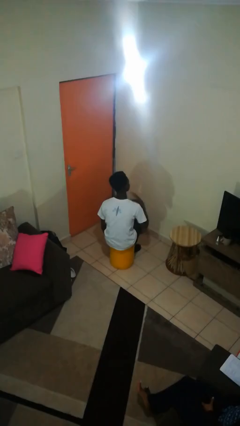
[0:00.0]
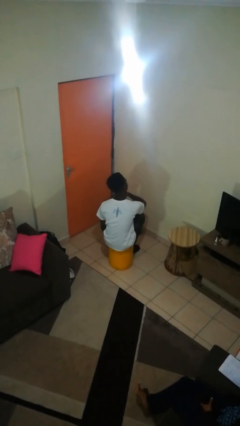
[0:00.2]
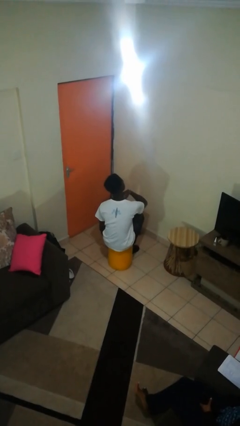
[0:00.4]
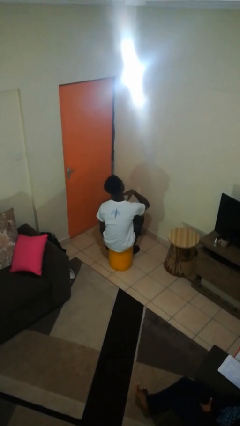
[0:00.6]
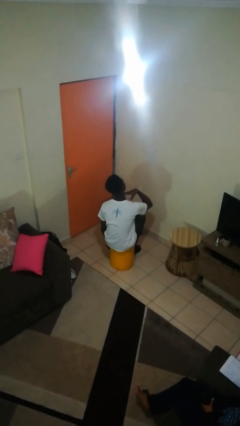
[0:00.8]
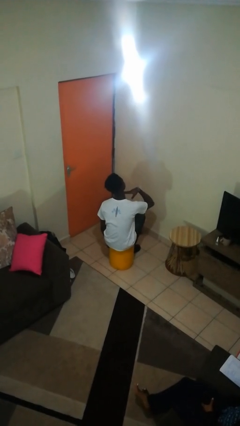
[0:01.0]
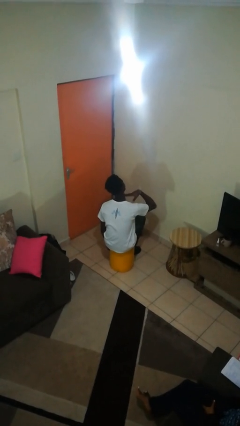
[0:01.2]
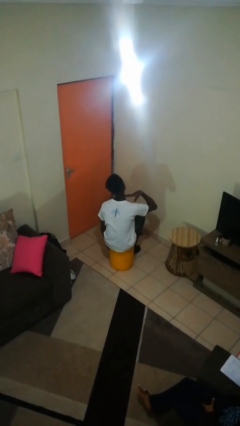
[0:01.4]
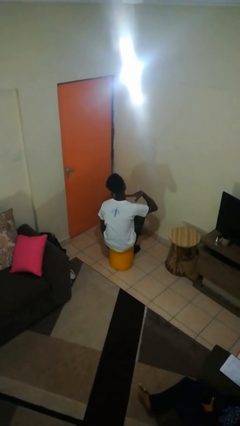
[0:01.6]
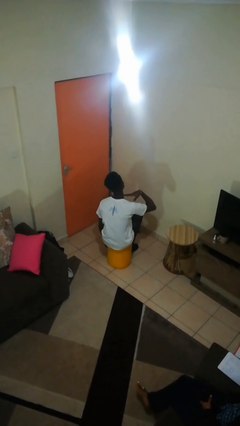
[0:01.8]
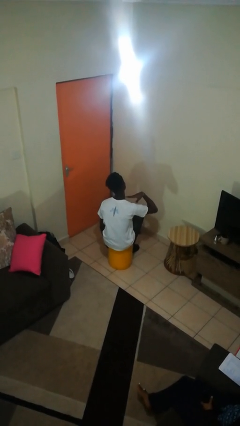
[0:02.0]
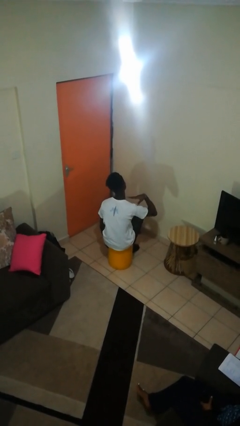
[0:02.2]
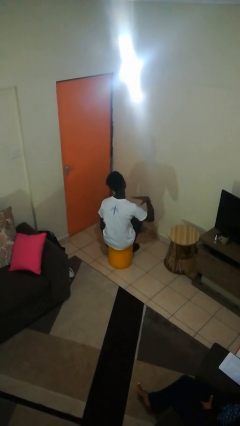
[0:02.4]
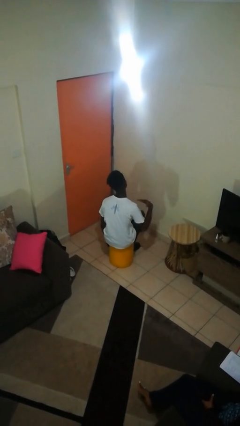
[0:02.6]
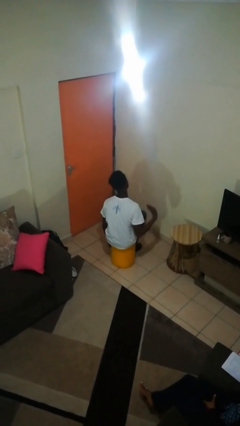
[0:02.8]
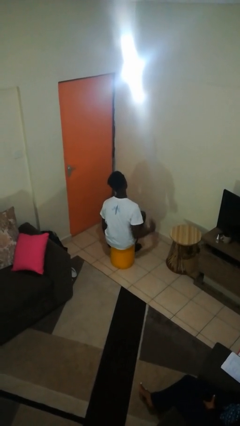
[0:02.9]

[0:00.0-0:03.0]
person gestures cut

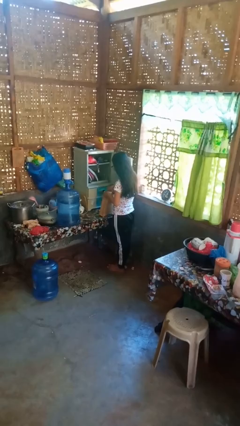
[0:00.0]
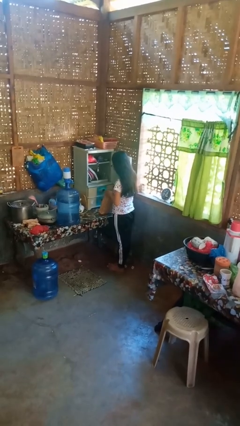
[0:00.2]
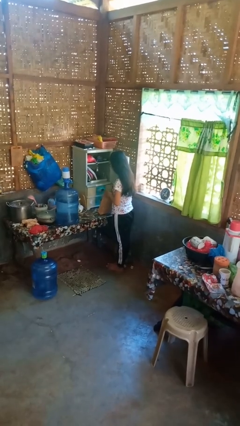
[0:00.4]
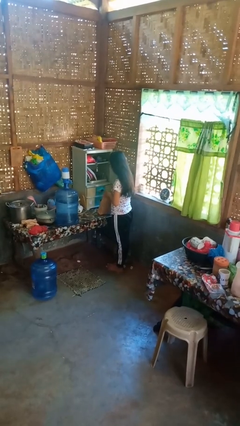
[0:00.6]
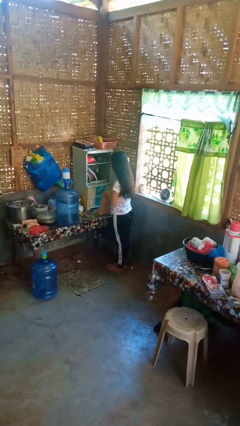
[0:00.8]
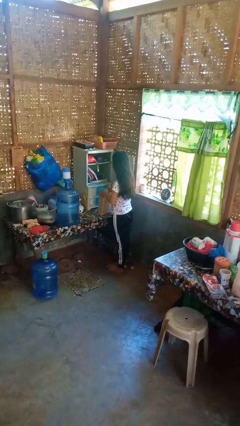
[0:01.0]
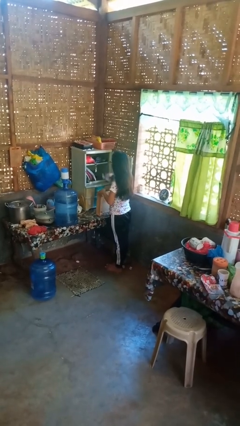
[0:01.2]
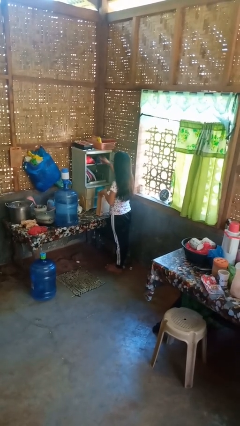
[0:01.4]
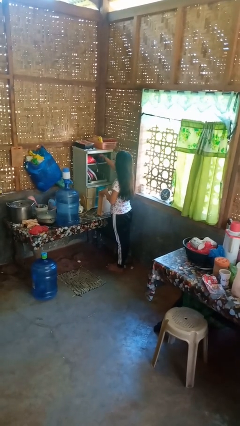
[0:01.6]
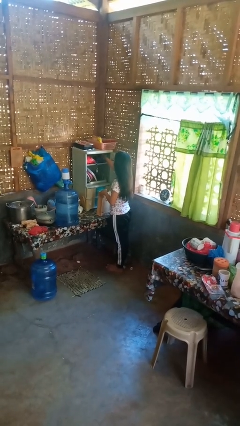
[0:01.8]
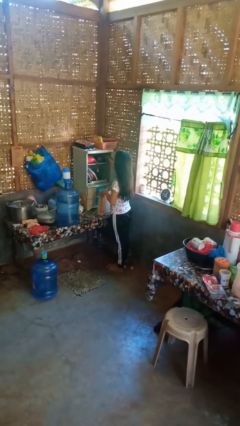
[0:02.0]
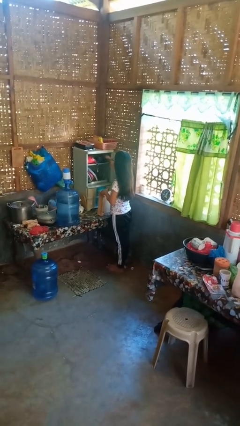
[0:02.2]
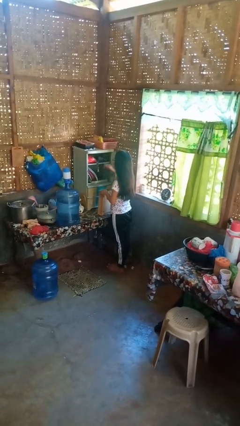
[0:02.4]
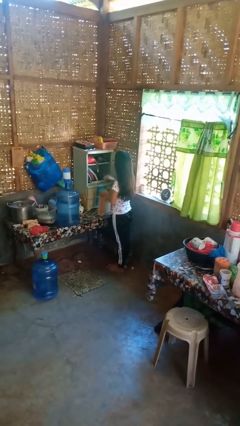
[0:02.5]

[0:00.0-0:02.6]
person loads groceries into cabinet

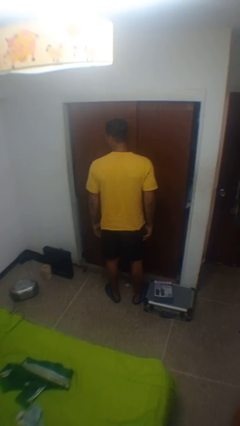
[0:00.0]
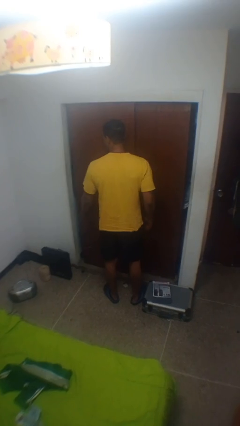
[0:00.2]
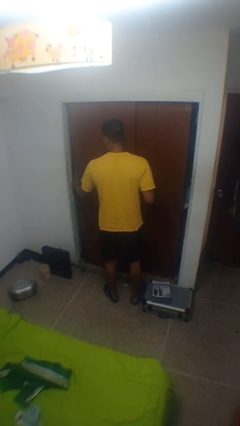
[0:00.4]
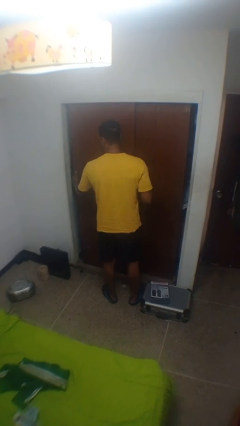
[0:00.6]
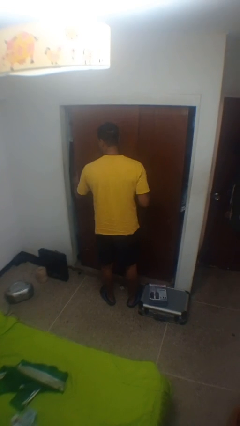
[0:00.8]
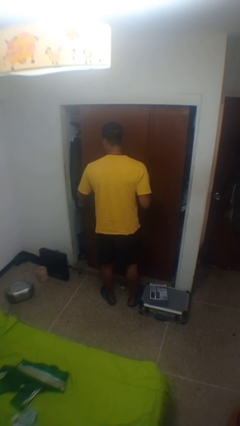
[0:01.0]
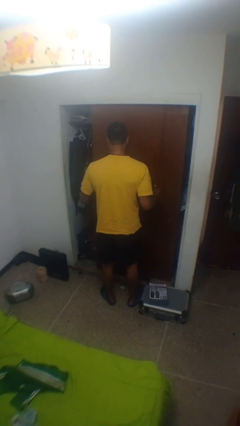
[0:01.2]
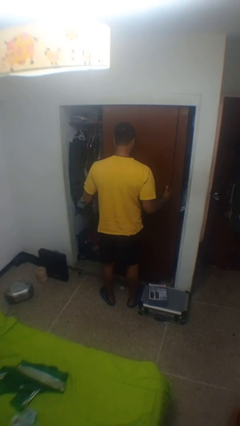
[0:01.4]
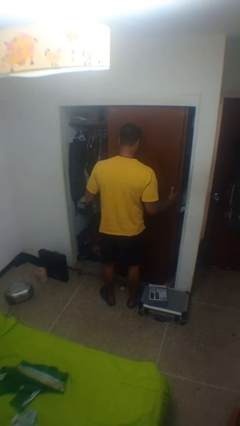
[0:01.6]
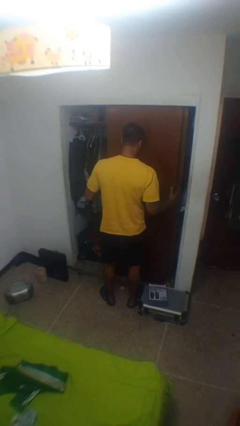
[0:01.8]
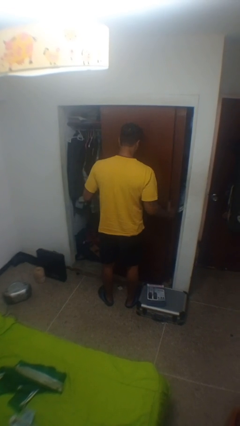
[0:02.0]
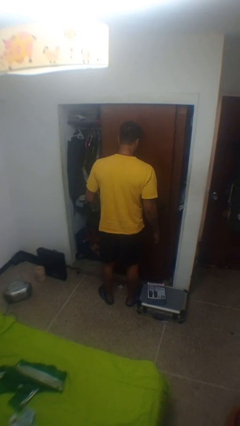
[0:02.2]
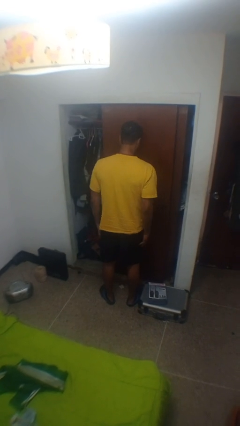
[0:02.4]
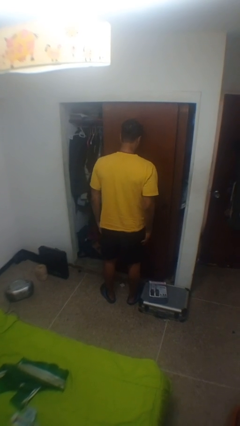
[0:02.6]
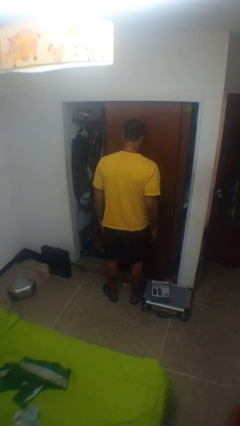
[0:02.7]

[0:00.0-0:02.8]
person opens closet door

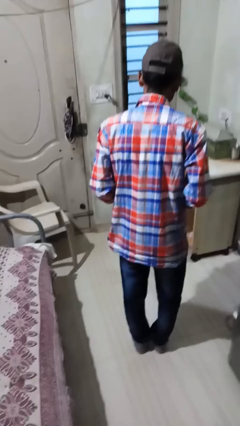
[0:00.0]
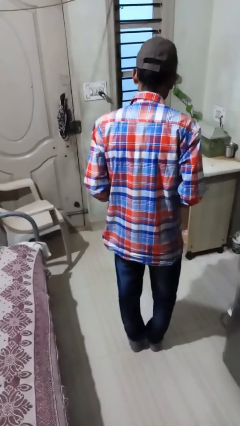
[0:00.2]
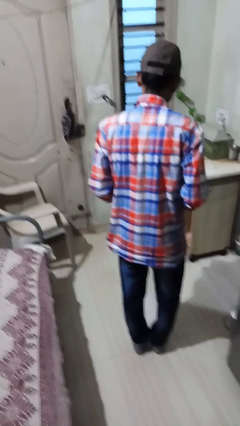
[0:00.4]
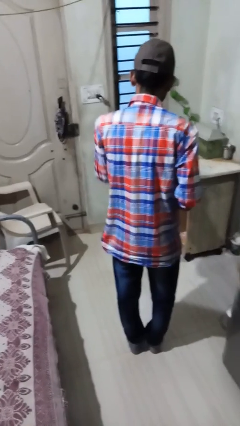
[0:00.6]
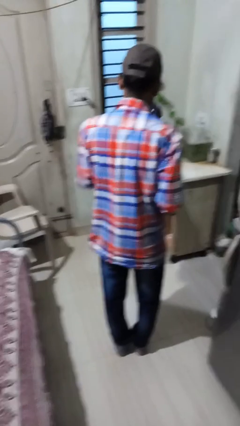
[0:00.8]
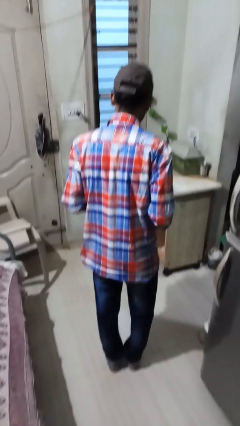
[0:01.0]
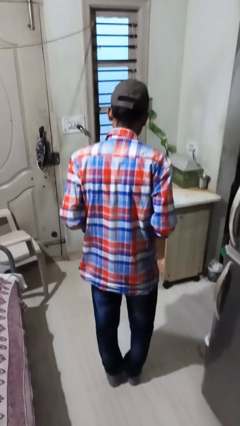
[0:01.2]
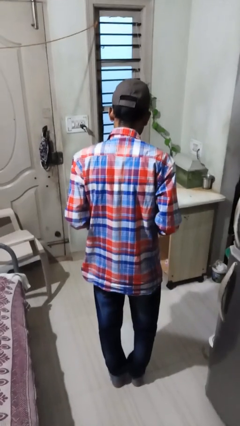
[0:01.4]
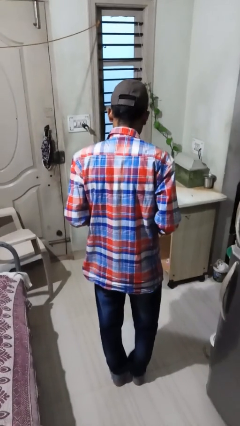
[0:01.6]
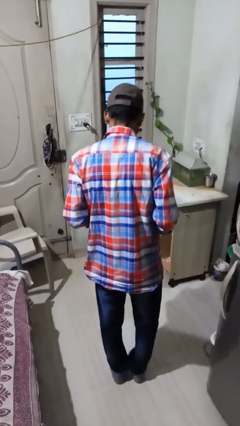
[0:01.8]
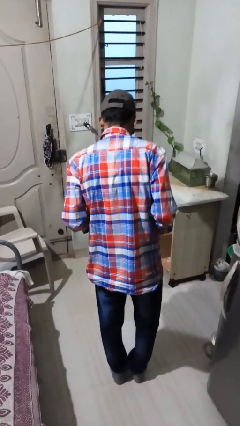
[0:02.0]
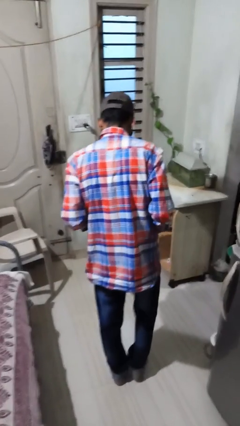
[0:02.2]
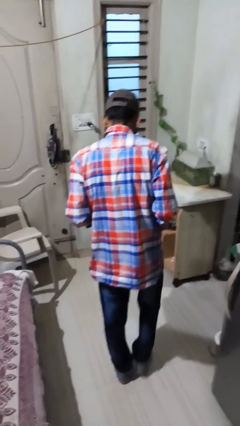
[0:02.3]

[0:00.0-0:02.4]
person throws object on table

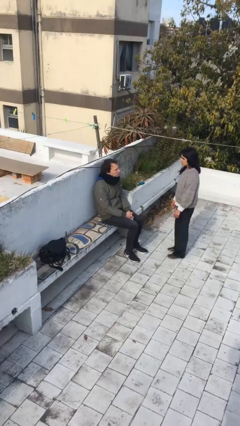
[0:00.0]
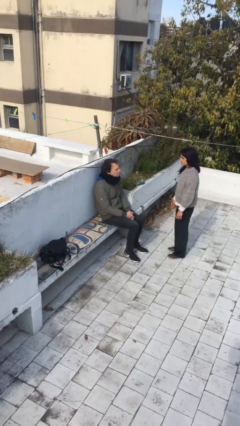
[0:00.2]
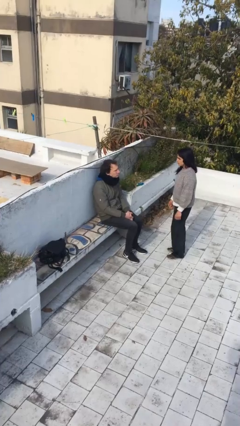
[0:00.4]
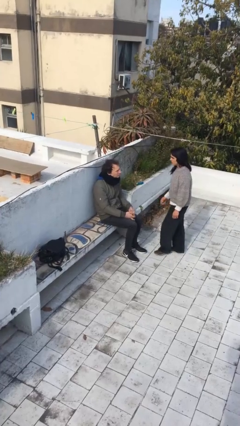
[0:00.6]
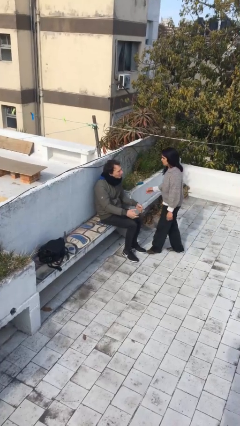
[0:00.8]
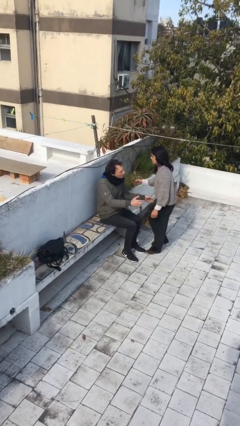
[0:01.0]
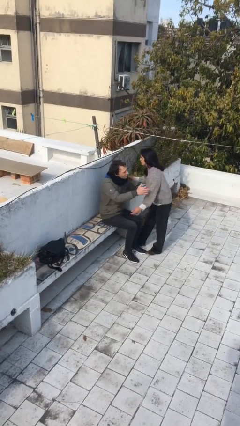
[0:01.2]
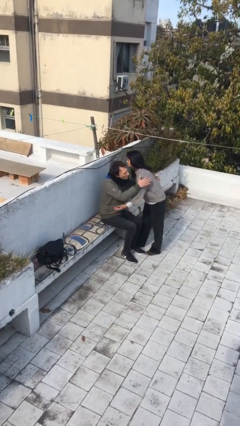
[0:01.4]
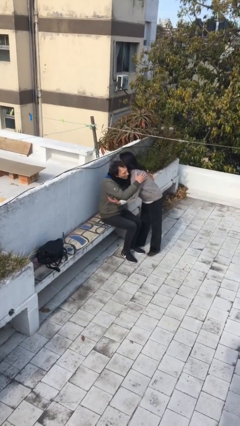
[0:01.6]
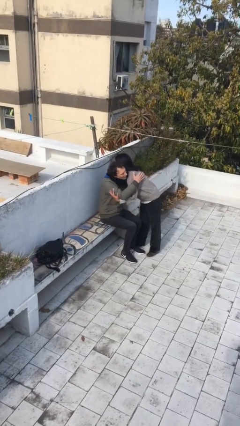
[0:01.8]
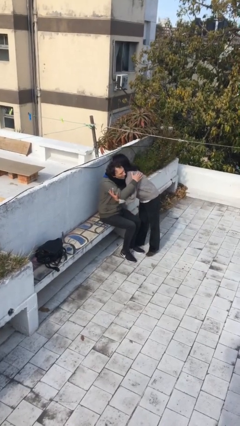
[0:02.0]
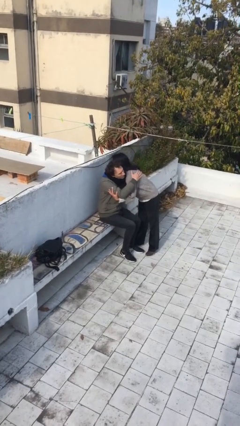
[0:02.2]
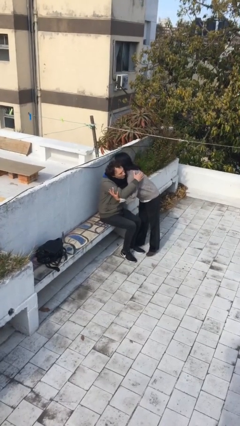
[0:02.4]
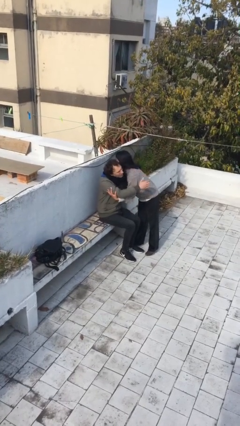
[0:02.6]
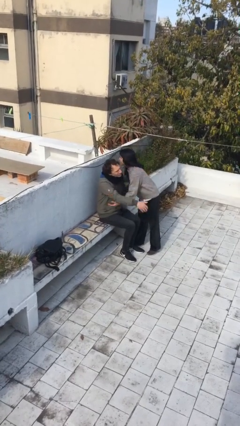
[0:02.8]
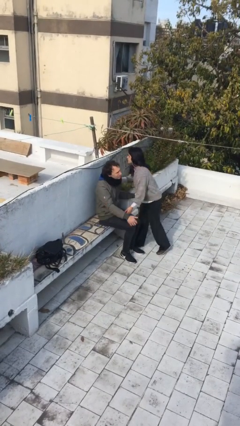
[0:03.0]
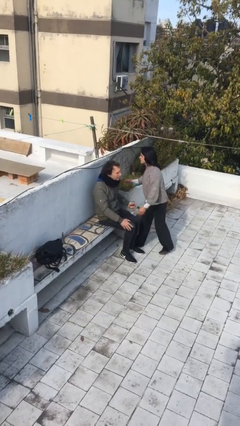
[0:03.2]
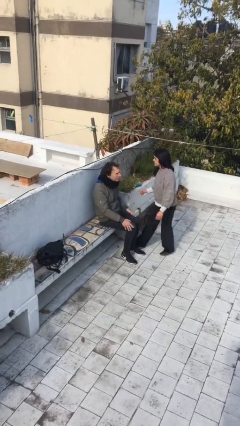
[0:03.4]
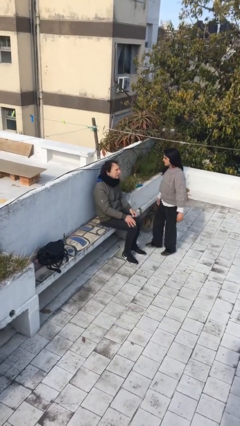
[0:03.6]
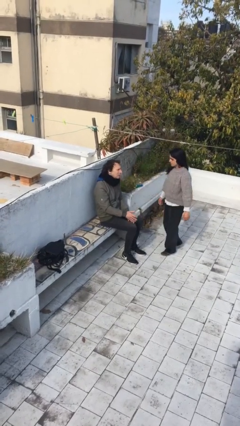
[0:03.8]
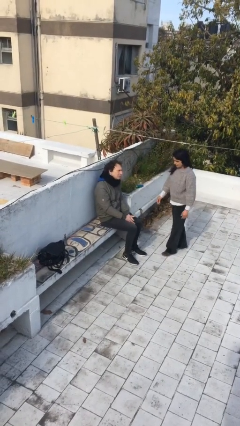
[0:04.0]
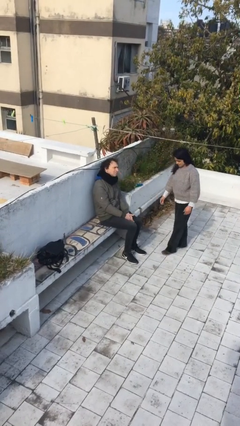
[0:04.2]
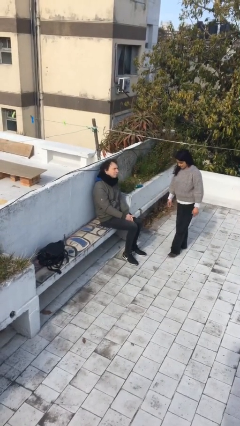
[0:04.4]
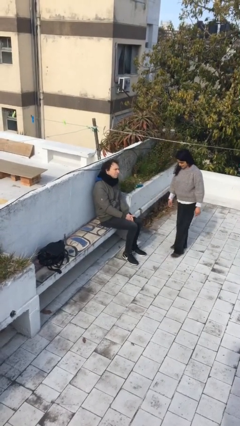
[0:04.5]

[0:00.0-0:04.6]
person embraces person

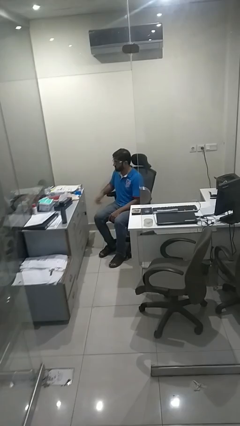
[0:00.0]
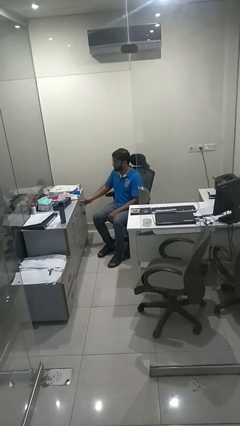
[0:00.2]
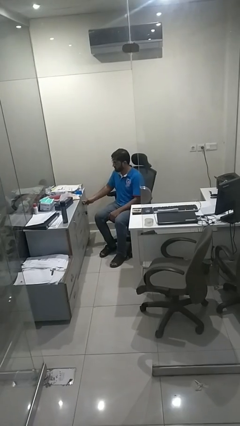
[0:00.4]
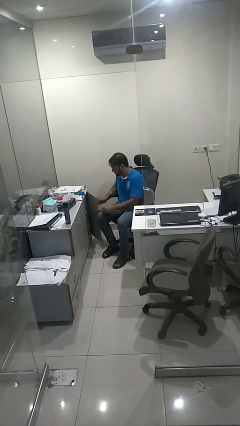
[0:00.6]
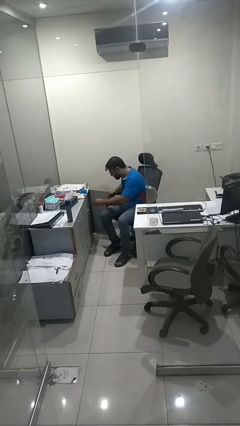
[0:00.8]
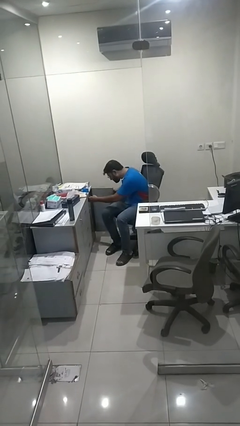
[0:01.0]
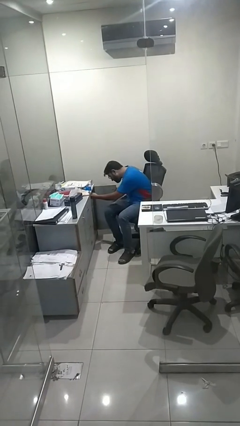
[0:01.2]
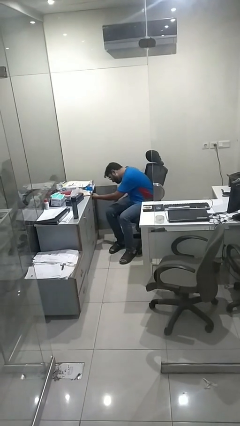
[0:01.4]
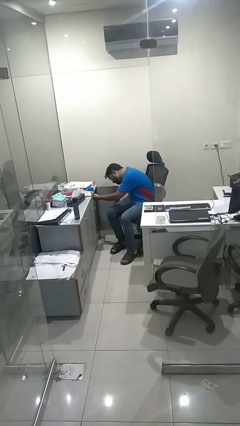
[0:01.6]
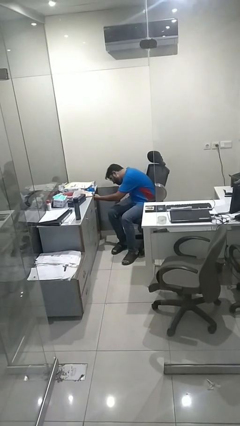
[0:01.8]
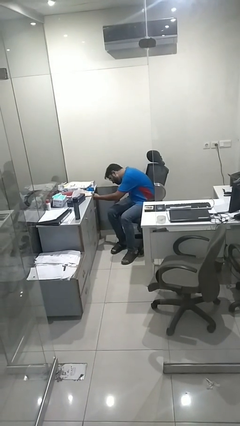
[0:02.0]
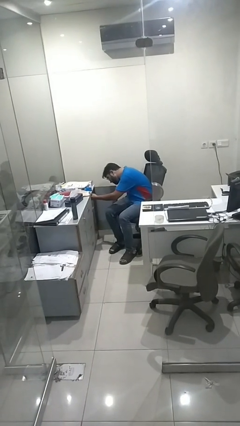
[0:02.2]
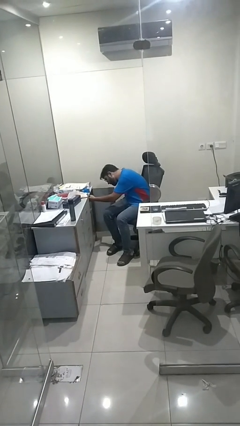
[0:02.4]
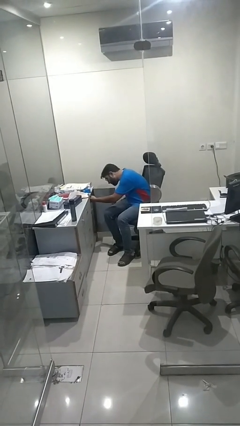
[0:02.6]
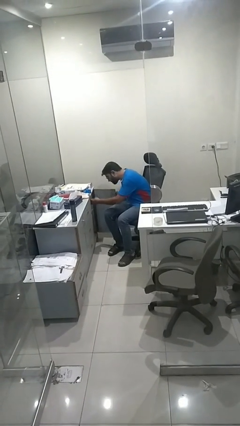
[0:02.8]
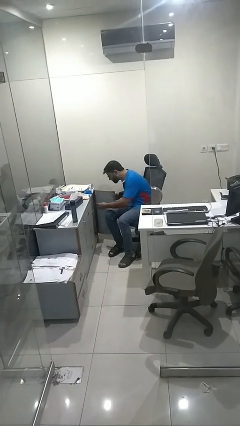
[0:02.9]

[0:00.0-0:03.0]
person searches in cabinet
